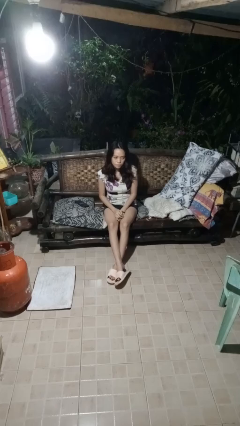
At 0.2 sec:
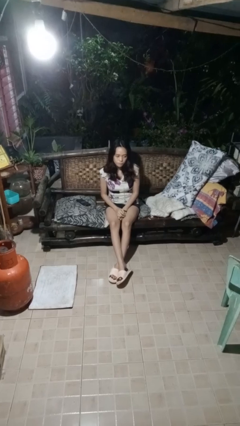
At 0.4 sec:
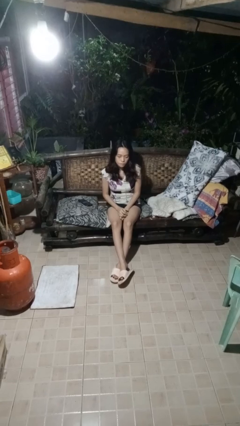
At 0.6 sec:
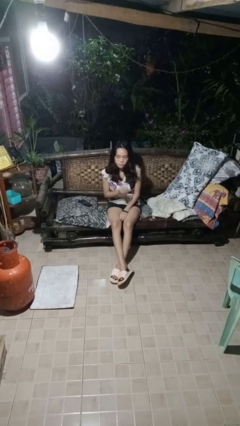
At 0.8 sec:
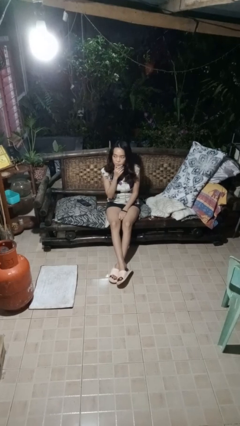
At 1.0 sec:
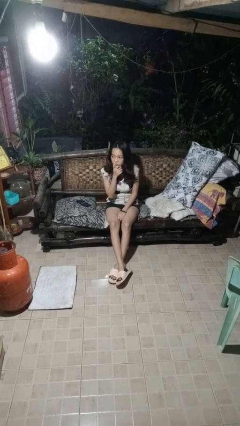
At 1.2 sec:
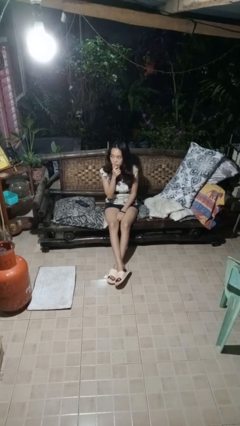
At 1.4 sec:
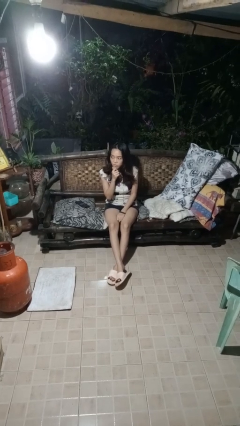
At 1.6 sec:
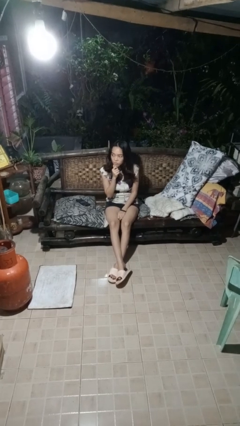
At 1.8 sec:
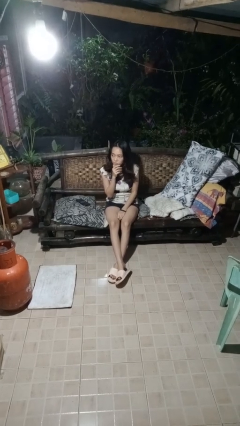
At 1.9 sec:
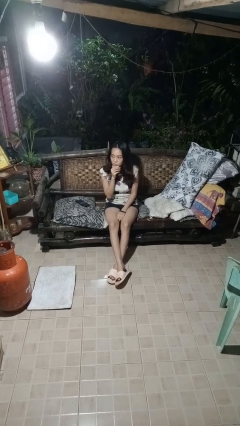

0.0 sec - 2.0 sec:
person strokes chin

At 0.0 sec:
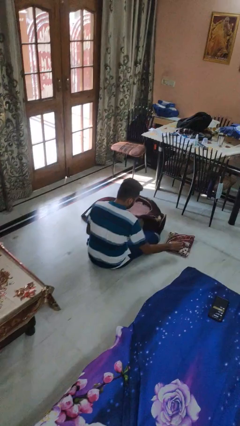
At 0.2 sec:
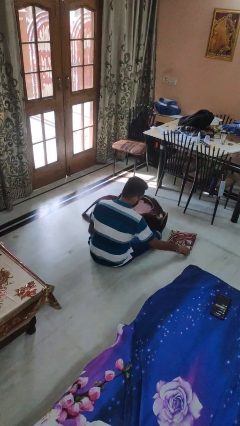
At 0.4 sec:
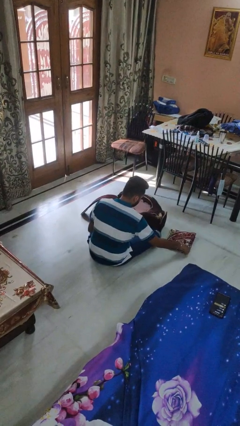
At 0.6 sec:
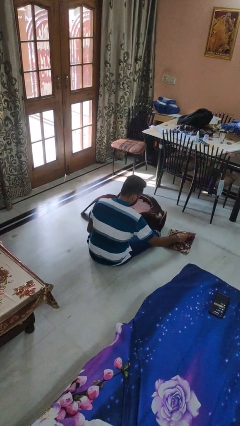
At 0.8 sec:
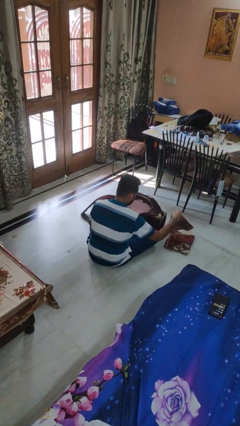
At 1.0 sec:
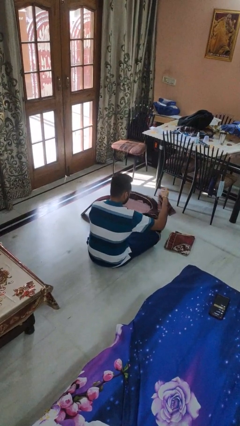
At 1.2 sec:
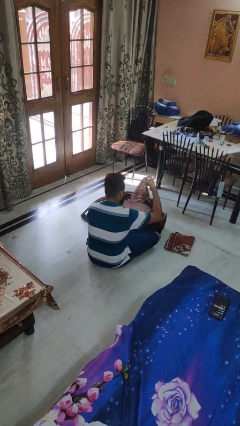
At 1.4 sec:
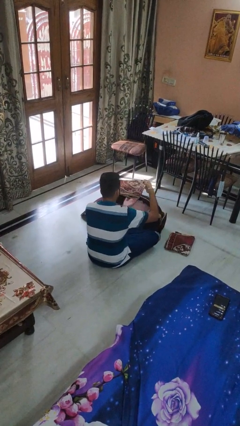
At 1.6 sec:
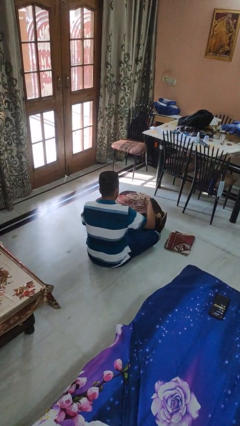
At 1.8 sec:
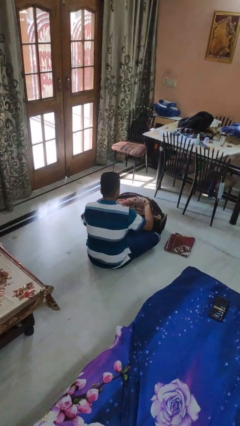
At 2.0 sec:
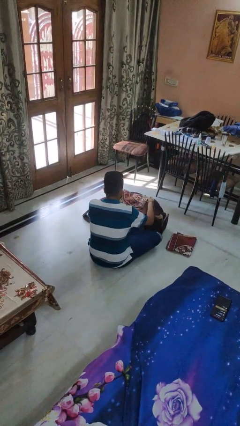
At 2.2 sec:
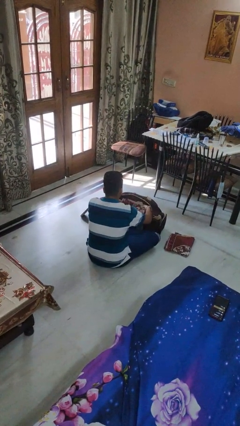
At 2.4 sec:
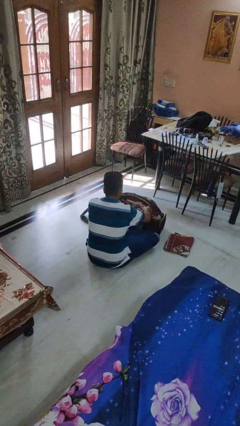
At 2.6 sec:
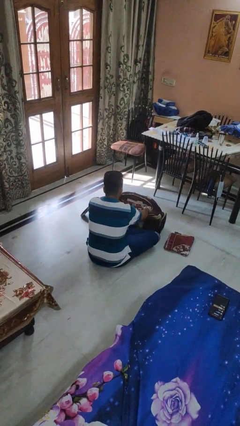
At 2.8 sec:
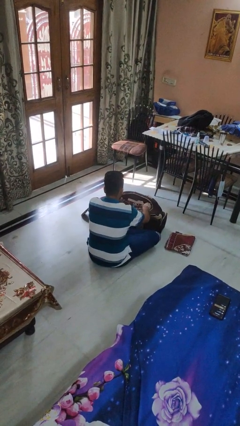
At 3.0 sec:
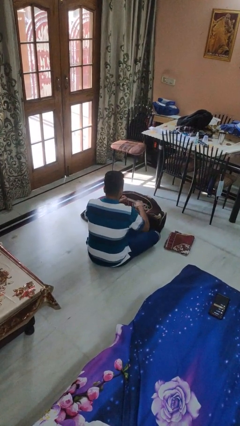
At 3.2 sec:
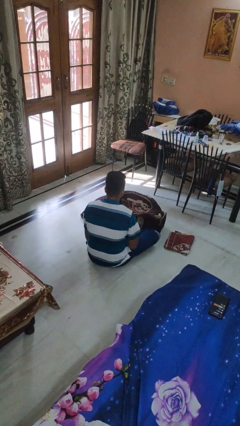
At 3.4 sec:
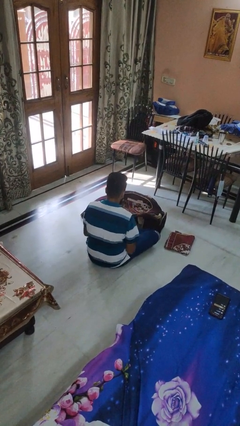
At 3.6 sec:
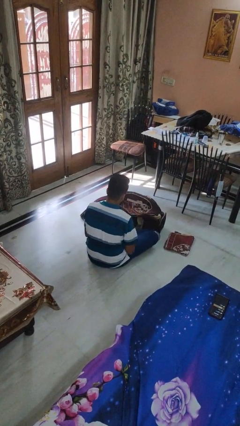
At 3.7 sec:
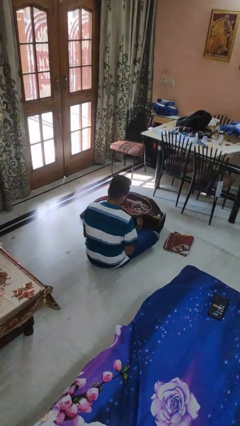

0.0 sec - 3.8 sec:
person loads clothes into suitcase

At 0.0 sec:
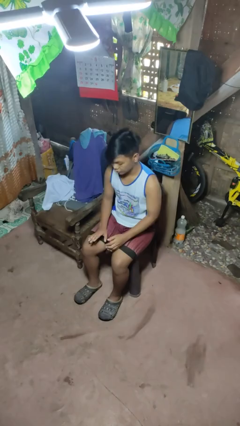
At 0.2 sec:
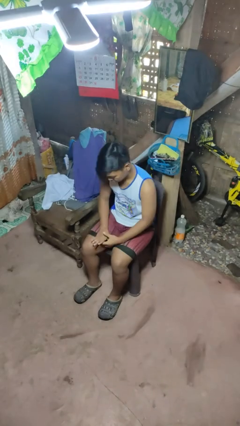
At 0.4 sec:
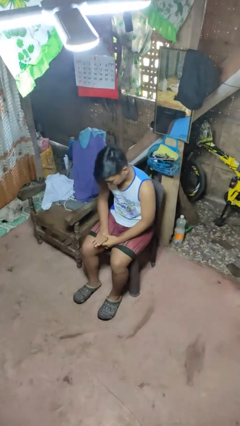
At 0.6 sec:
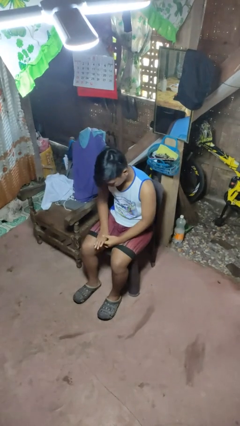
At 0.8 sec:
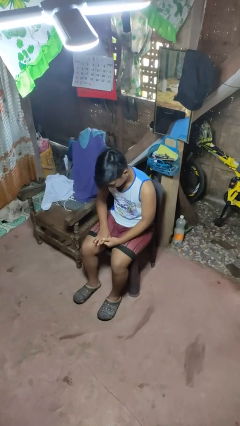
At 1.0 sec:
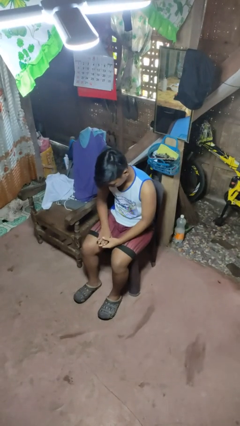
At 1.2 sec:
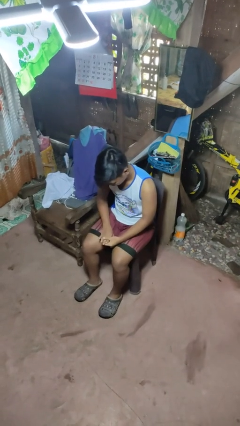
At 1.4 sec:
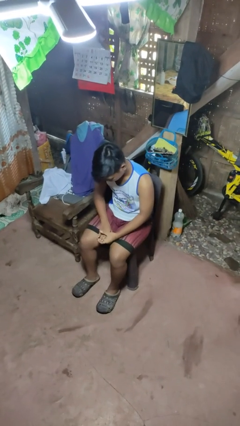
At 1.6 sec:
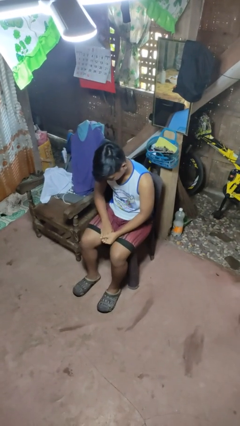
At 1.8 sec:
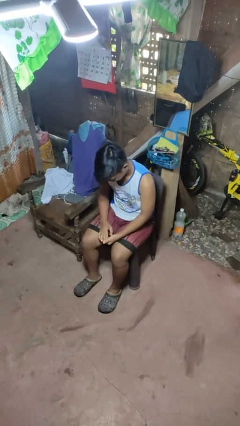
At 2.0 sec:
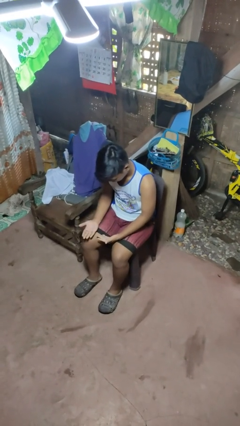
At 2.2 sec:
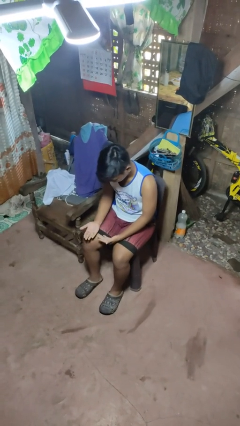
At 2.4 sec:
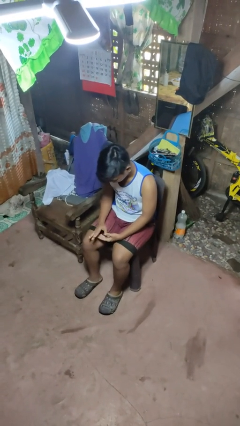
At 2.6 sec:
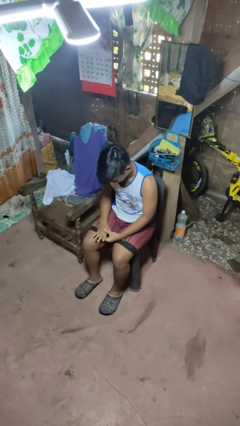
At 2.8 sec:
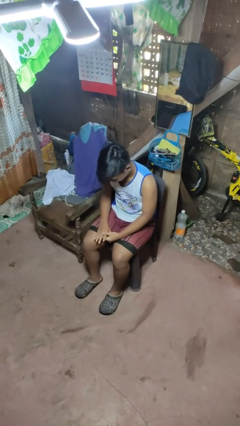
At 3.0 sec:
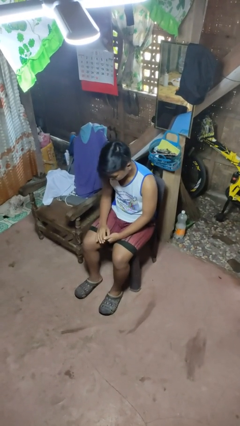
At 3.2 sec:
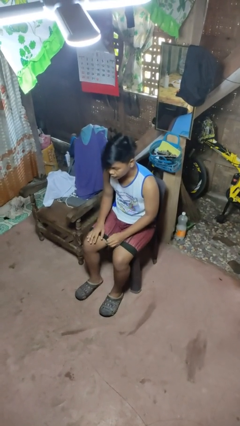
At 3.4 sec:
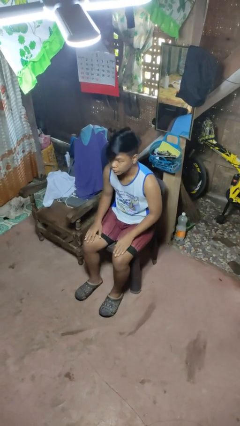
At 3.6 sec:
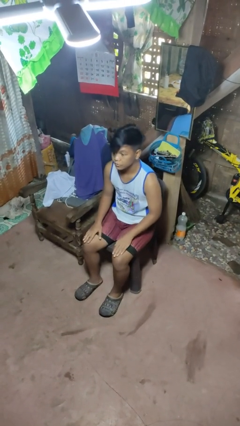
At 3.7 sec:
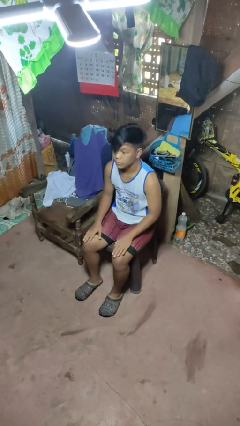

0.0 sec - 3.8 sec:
person looks at hands in lap

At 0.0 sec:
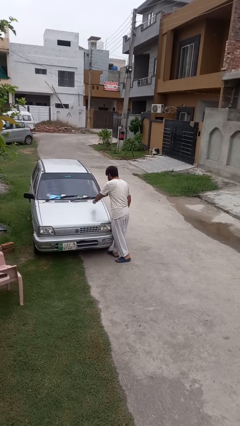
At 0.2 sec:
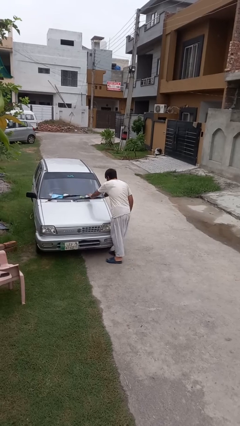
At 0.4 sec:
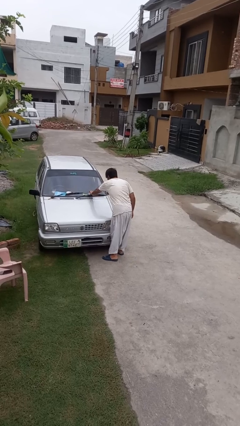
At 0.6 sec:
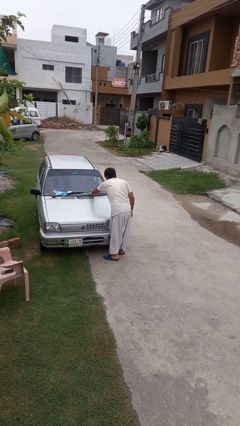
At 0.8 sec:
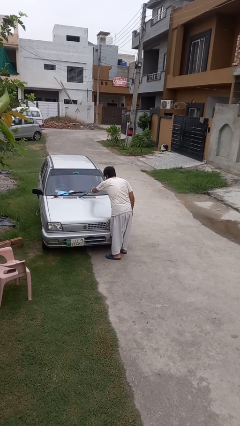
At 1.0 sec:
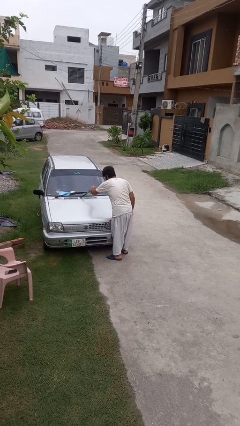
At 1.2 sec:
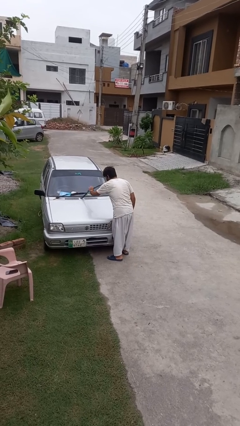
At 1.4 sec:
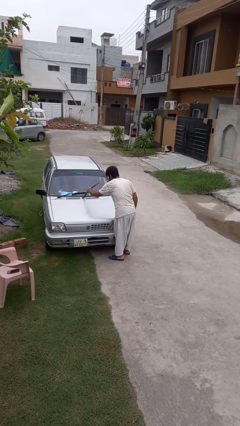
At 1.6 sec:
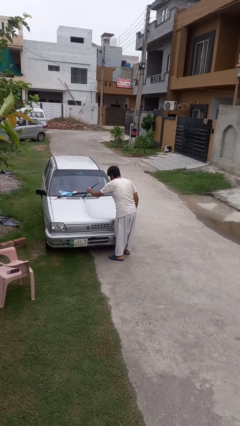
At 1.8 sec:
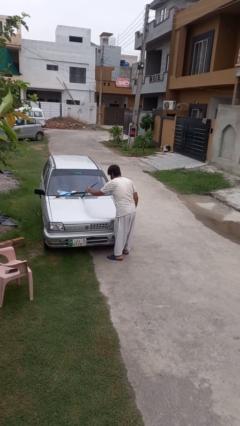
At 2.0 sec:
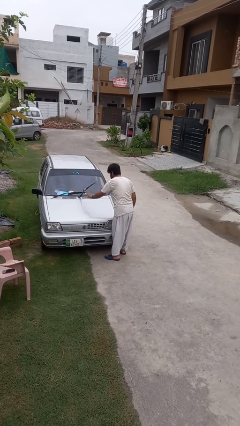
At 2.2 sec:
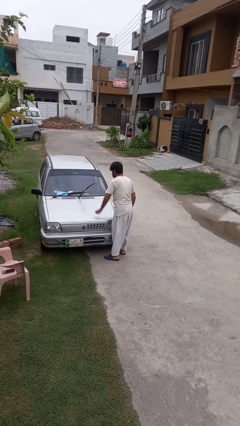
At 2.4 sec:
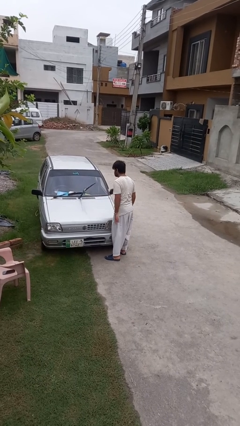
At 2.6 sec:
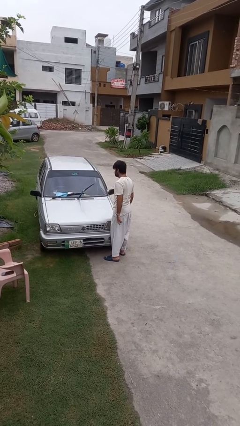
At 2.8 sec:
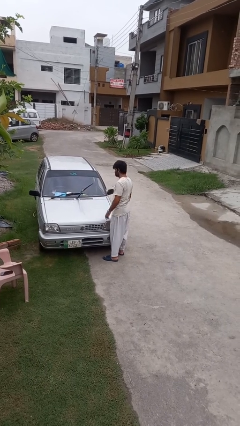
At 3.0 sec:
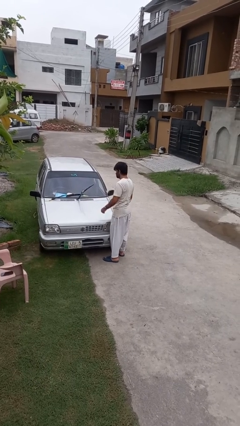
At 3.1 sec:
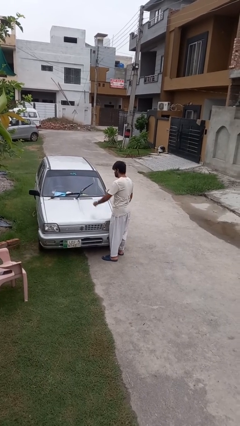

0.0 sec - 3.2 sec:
person flips up car wipers

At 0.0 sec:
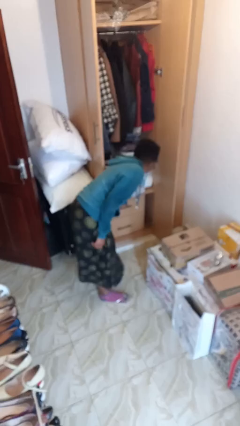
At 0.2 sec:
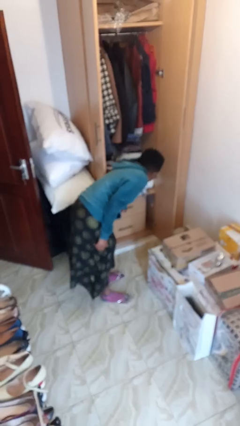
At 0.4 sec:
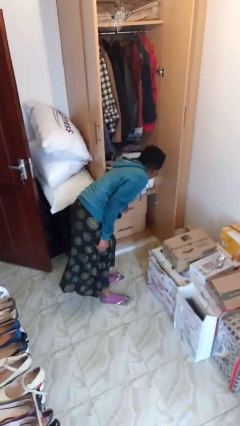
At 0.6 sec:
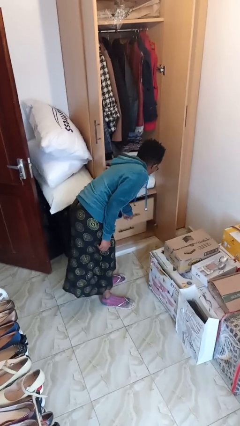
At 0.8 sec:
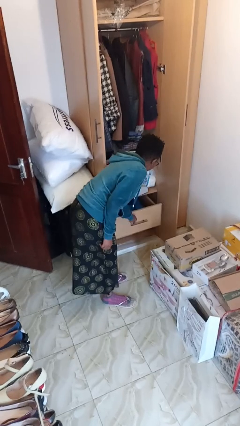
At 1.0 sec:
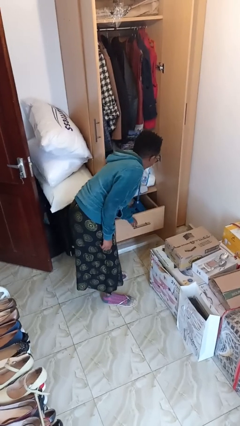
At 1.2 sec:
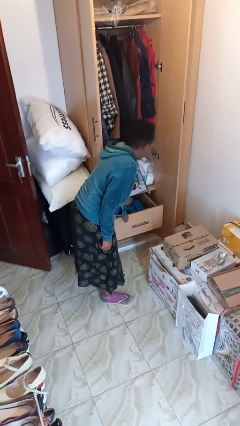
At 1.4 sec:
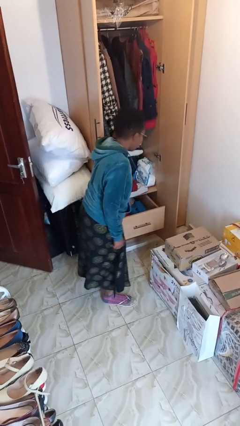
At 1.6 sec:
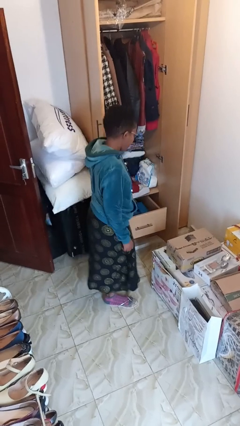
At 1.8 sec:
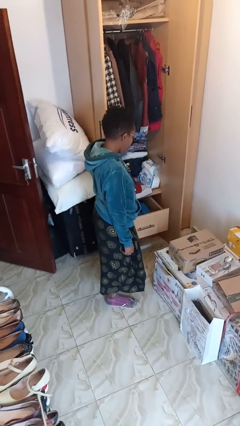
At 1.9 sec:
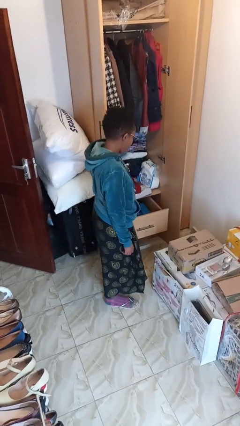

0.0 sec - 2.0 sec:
person opens dresser drawer

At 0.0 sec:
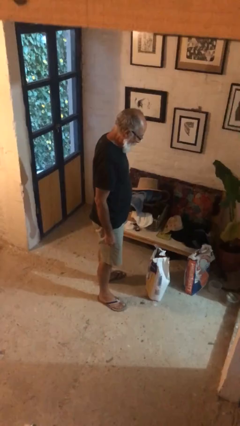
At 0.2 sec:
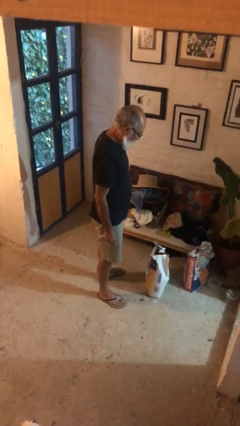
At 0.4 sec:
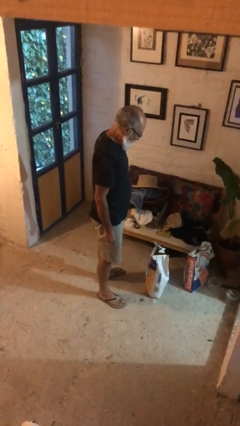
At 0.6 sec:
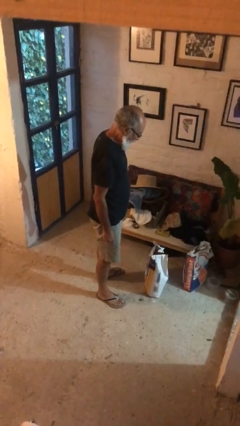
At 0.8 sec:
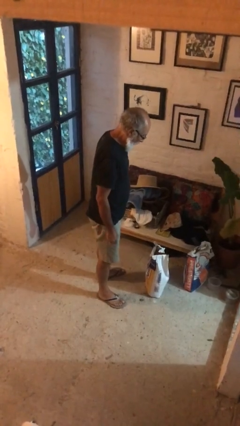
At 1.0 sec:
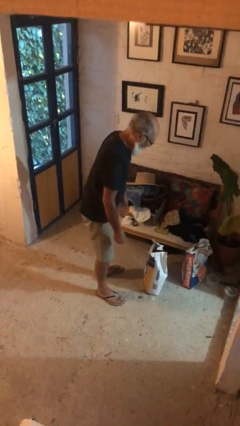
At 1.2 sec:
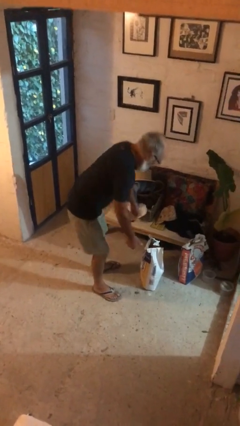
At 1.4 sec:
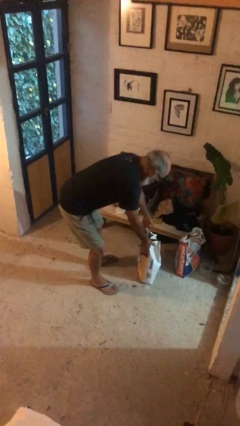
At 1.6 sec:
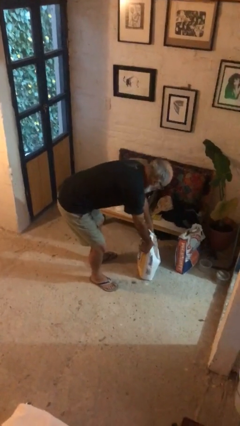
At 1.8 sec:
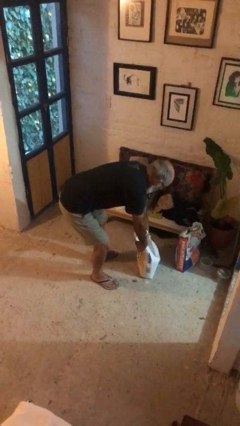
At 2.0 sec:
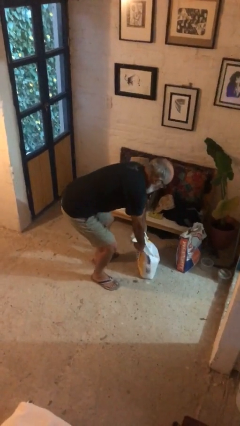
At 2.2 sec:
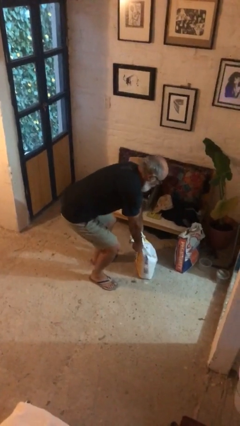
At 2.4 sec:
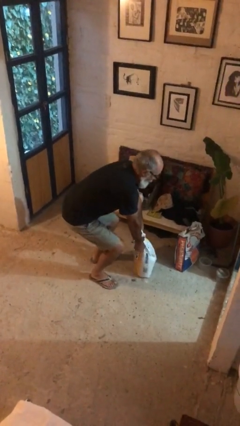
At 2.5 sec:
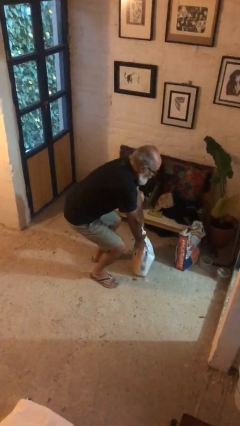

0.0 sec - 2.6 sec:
person picks up object from floor
